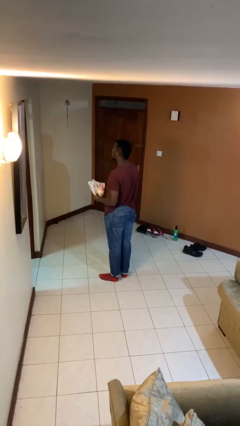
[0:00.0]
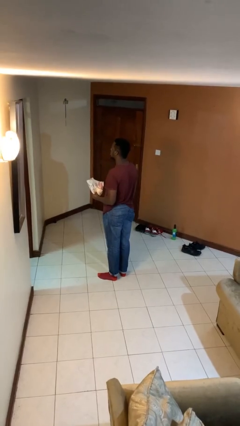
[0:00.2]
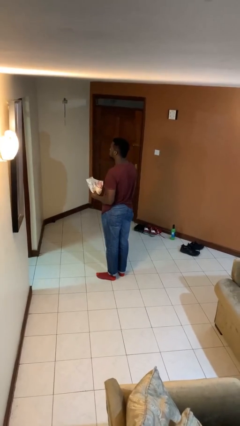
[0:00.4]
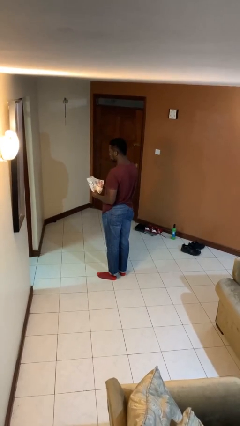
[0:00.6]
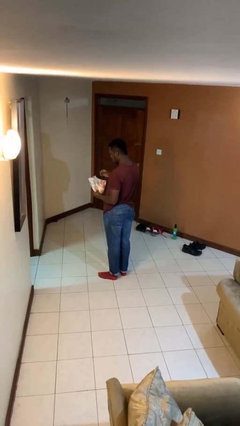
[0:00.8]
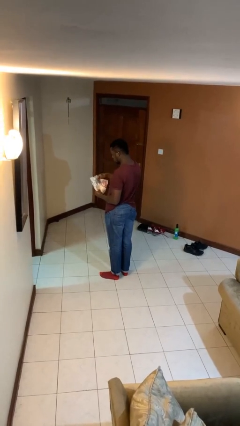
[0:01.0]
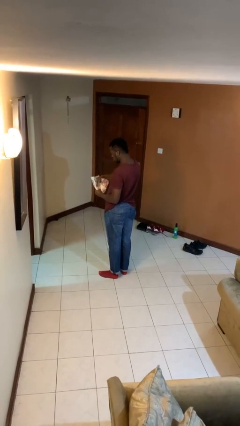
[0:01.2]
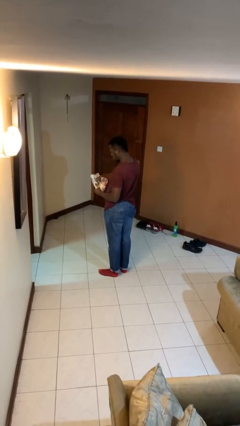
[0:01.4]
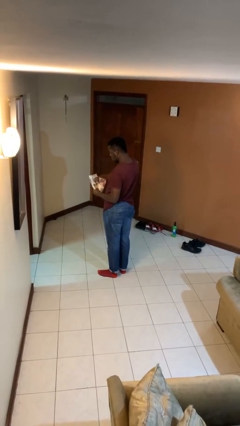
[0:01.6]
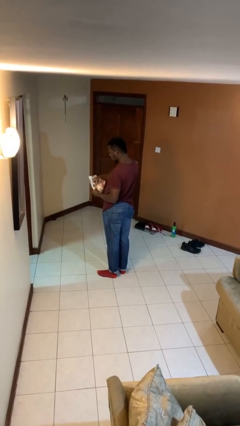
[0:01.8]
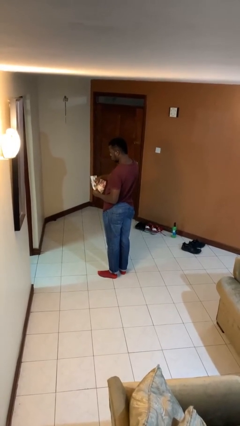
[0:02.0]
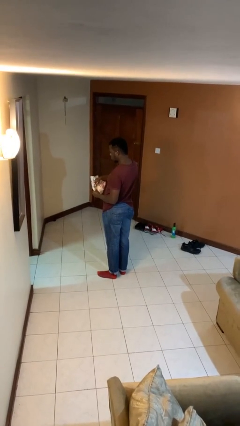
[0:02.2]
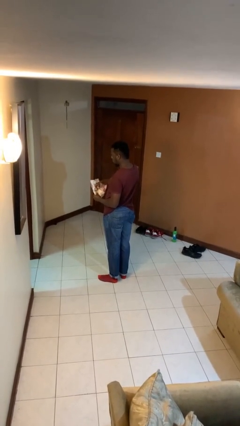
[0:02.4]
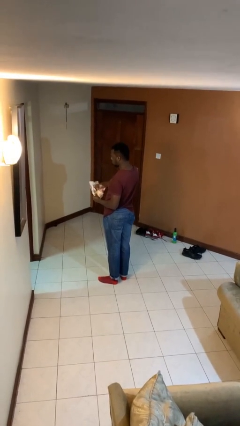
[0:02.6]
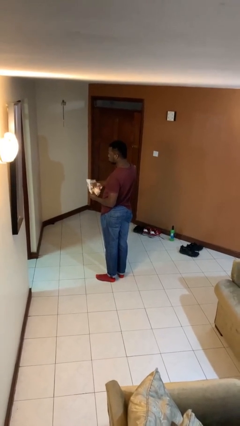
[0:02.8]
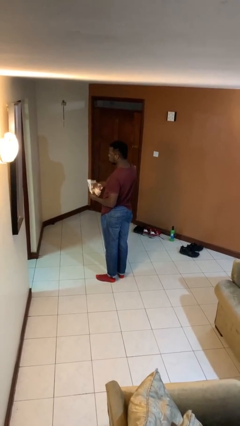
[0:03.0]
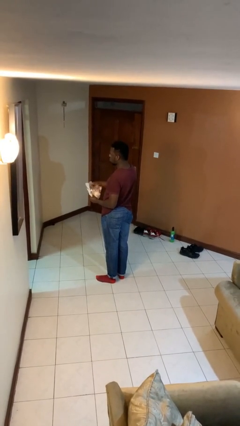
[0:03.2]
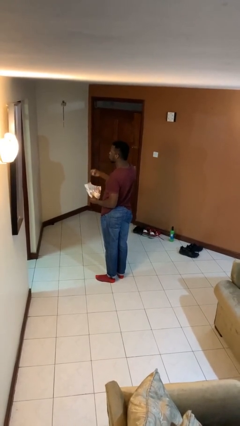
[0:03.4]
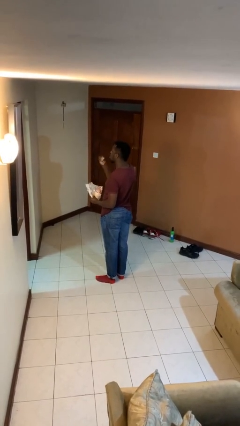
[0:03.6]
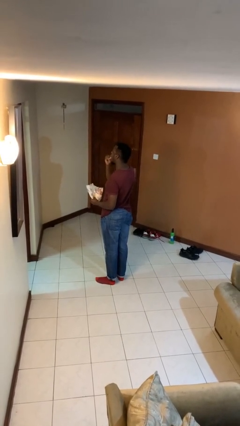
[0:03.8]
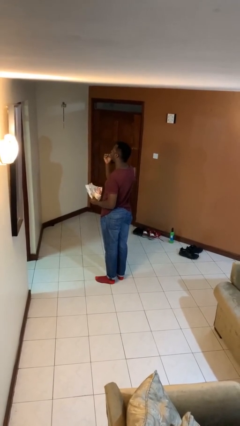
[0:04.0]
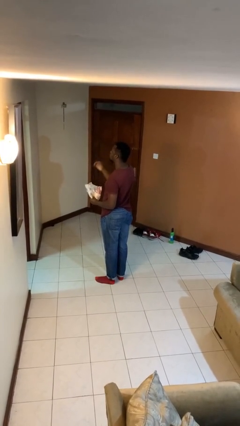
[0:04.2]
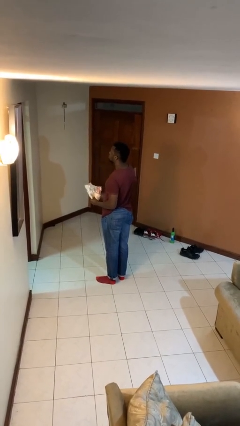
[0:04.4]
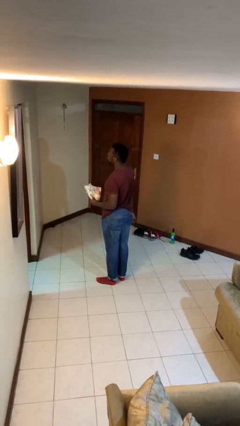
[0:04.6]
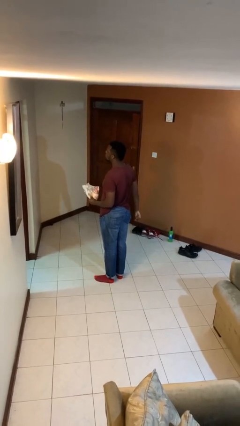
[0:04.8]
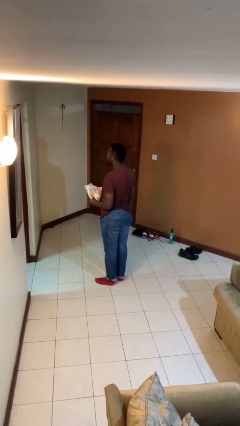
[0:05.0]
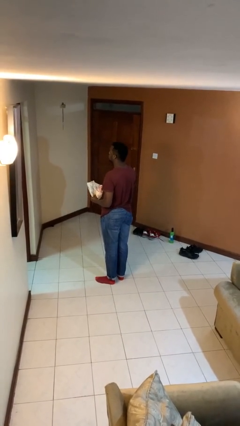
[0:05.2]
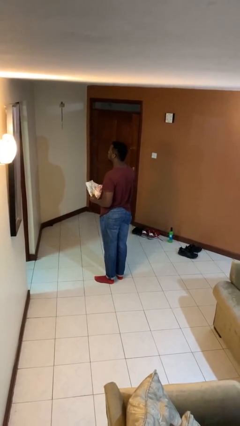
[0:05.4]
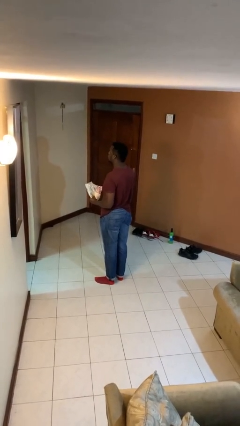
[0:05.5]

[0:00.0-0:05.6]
person eats snack from bag

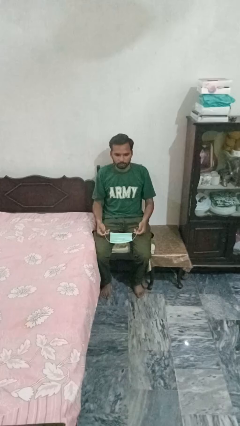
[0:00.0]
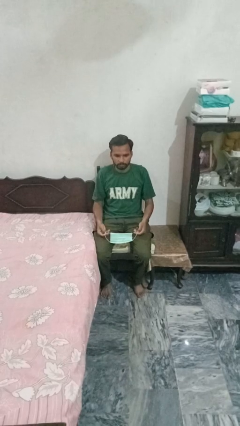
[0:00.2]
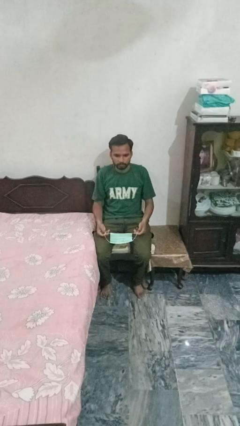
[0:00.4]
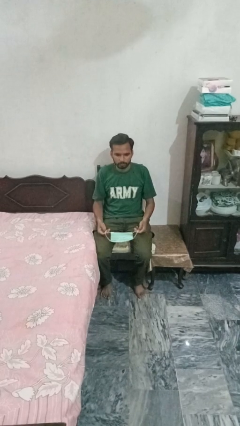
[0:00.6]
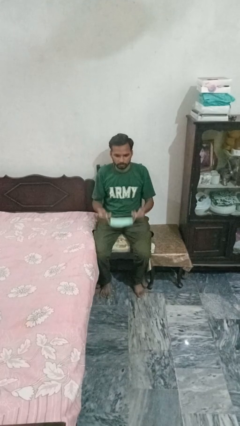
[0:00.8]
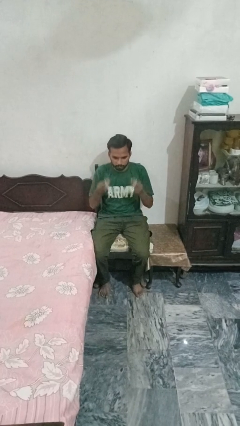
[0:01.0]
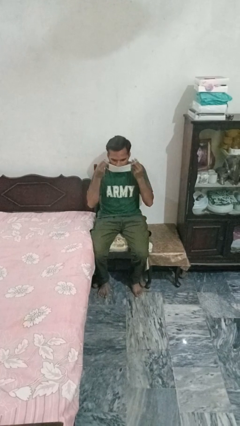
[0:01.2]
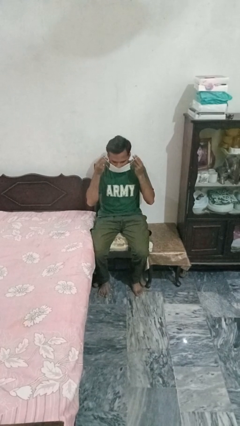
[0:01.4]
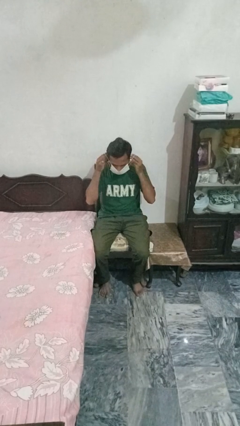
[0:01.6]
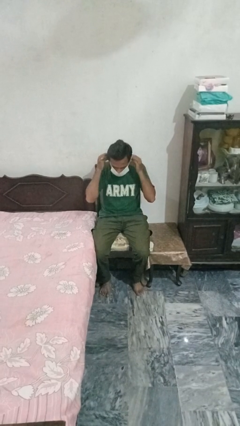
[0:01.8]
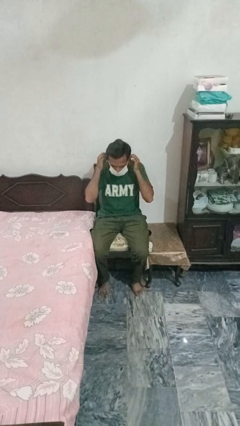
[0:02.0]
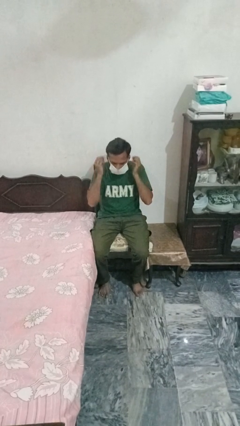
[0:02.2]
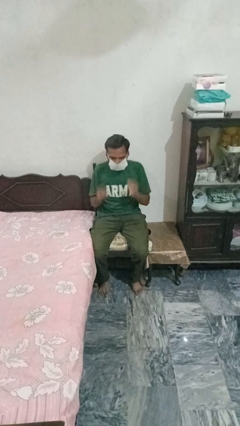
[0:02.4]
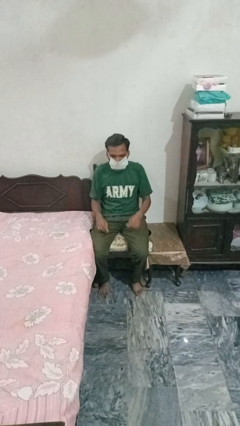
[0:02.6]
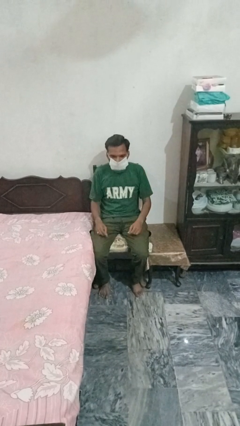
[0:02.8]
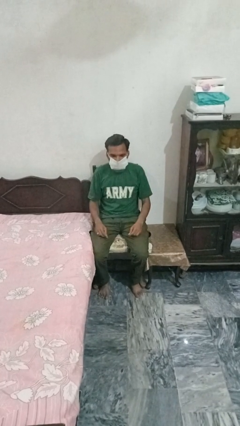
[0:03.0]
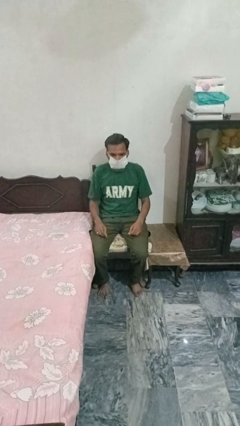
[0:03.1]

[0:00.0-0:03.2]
person puts on facemask

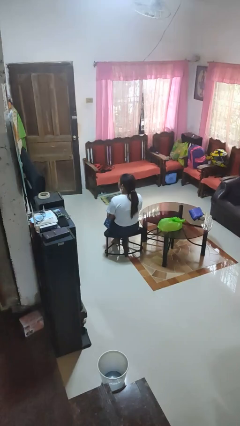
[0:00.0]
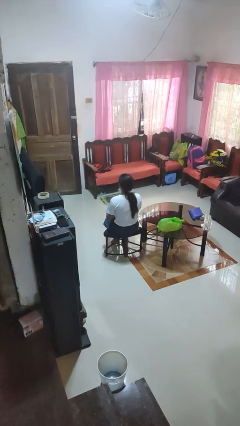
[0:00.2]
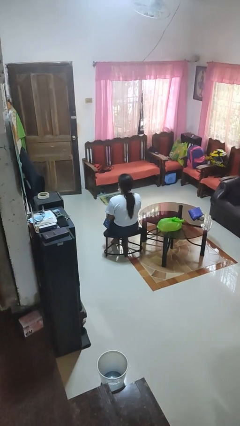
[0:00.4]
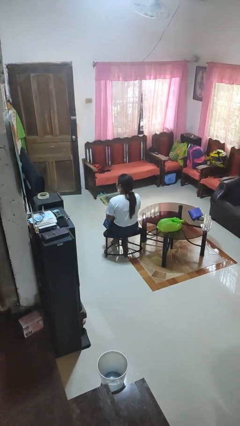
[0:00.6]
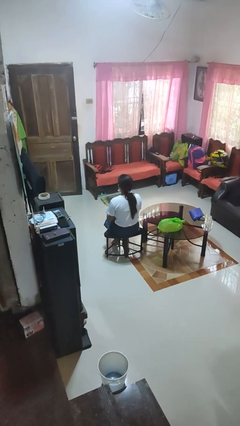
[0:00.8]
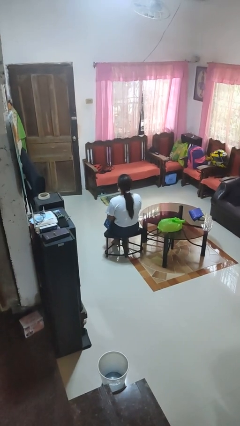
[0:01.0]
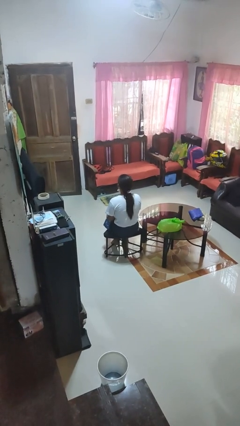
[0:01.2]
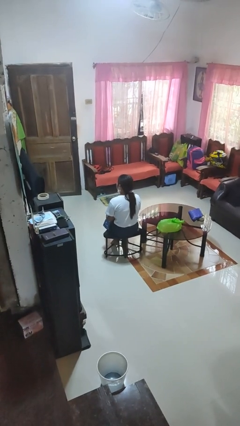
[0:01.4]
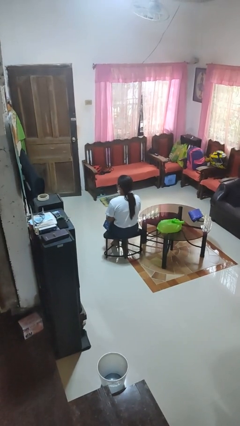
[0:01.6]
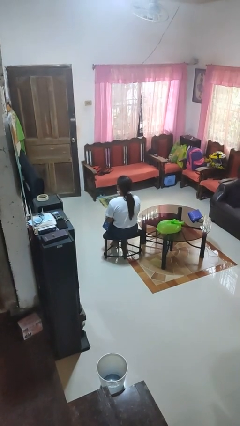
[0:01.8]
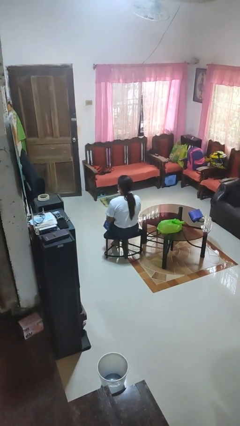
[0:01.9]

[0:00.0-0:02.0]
person shakes head

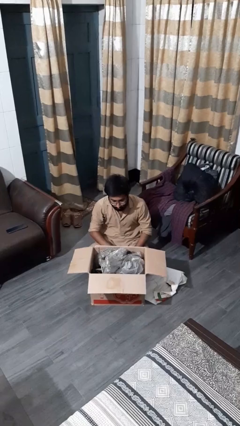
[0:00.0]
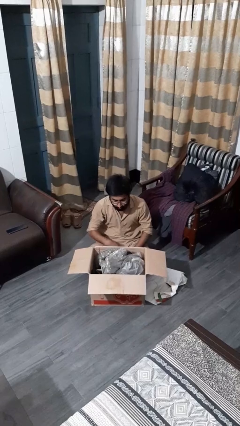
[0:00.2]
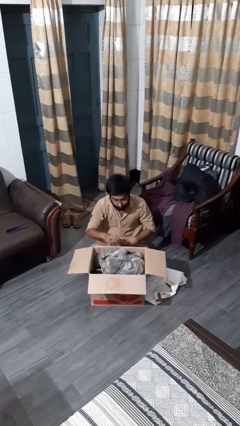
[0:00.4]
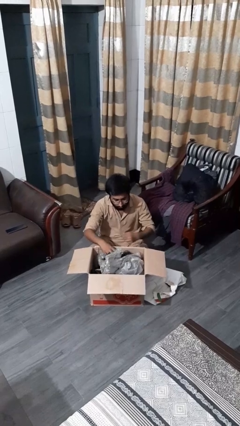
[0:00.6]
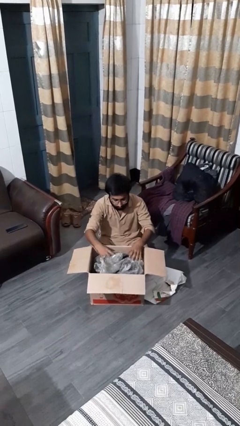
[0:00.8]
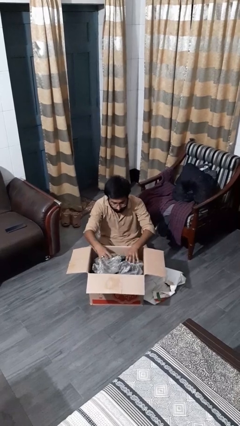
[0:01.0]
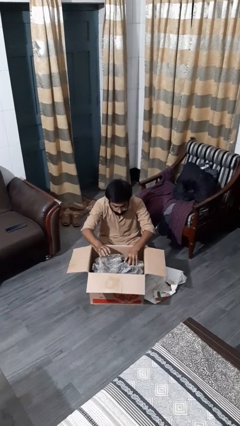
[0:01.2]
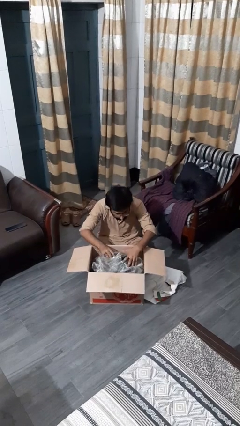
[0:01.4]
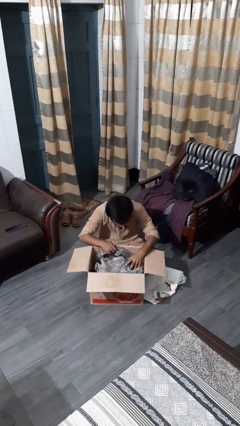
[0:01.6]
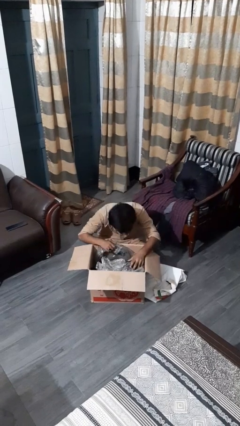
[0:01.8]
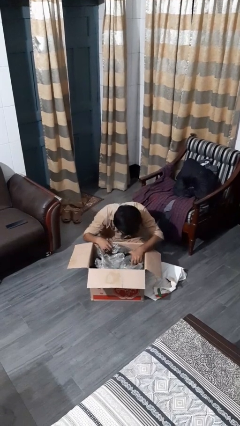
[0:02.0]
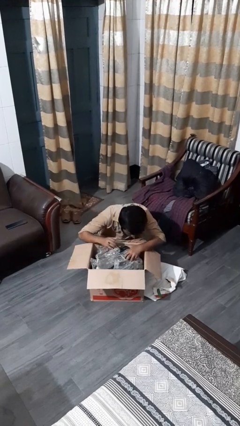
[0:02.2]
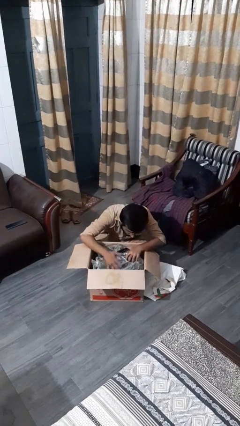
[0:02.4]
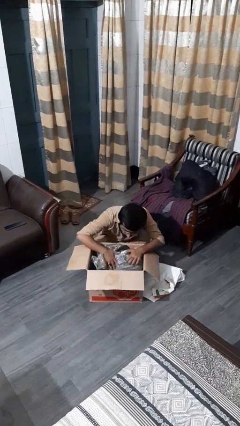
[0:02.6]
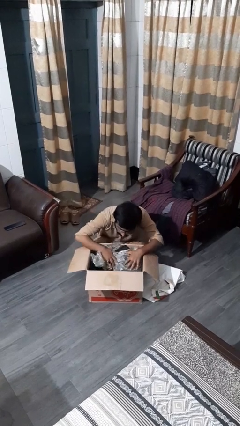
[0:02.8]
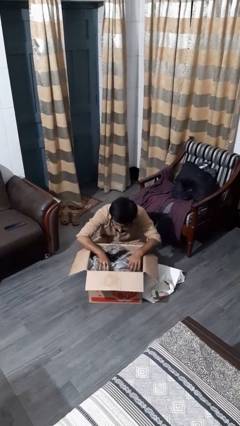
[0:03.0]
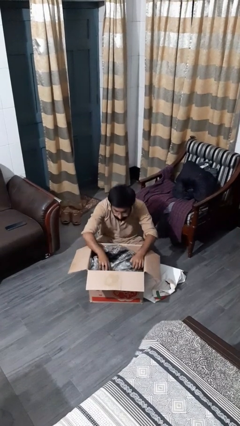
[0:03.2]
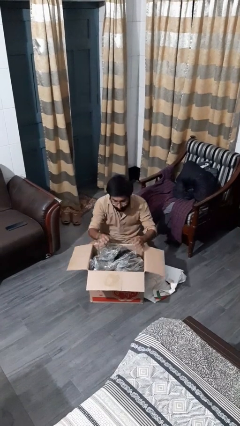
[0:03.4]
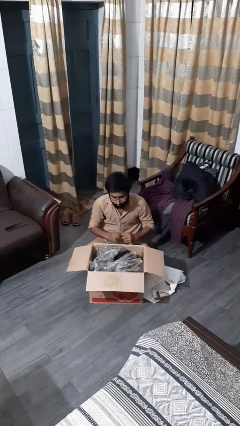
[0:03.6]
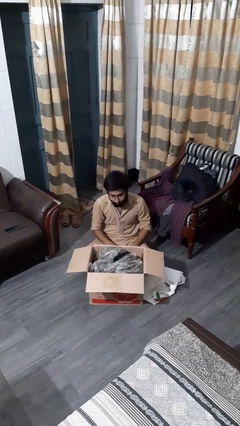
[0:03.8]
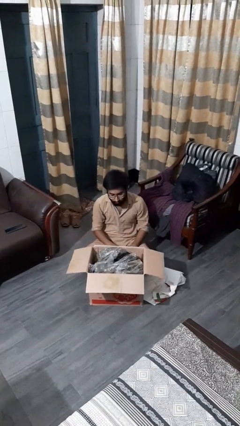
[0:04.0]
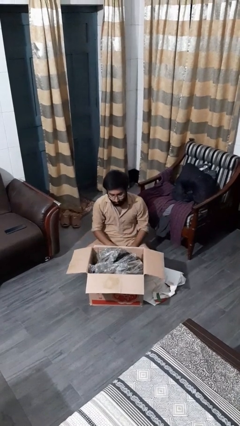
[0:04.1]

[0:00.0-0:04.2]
person searches in box

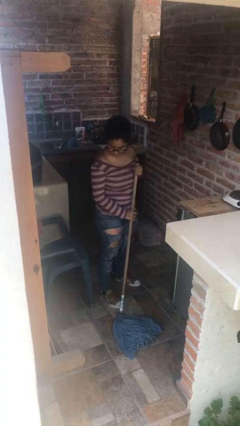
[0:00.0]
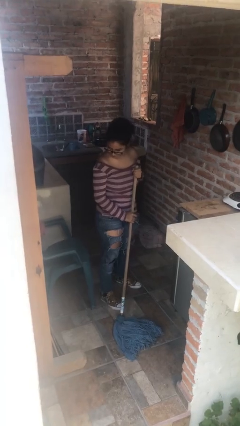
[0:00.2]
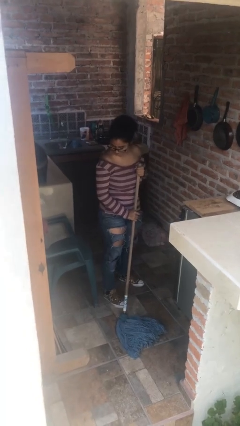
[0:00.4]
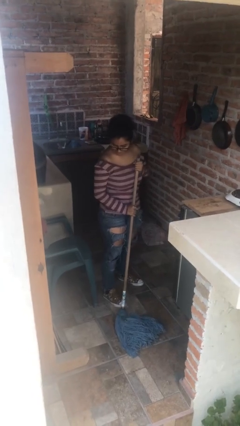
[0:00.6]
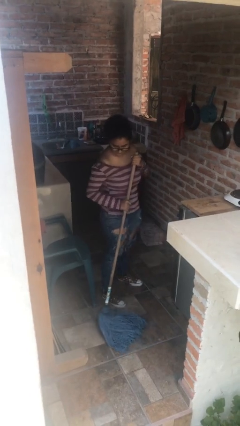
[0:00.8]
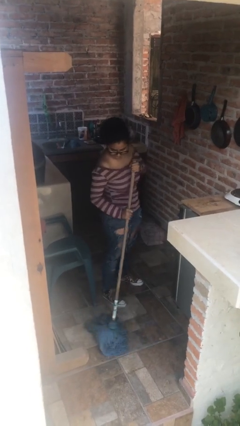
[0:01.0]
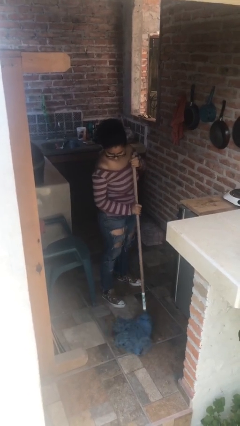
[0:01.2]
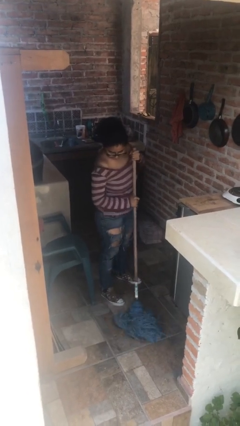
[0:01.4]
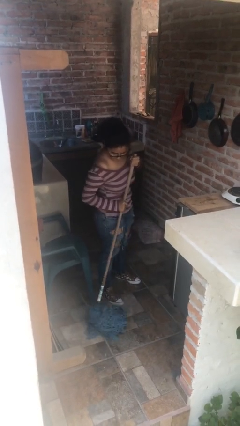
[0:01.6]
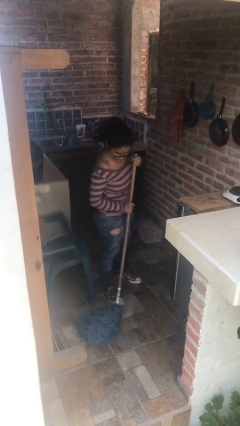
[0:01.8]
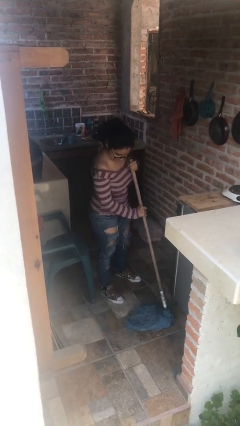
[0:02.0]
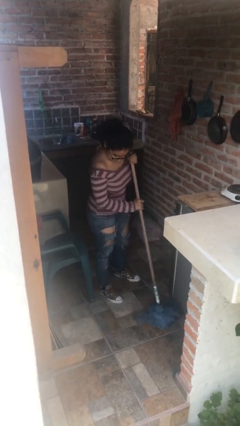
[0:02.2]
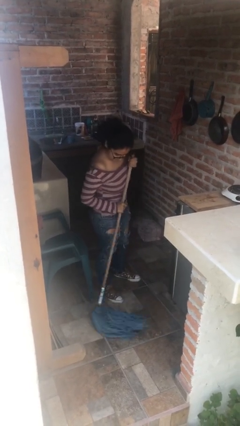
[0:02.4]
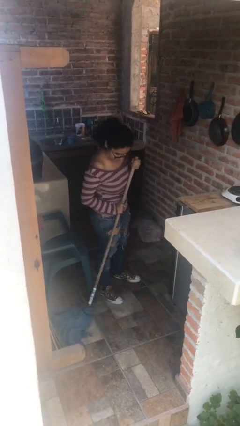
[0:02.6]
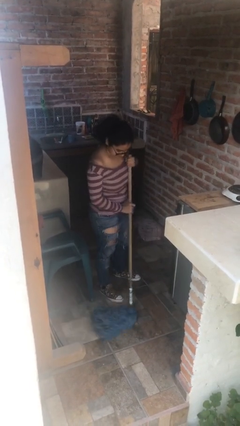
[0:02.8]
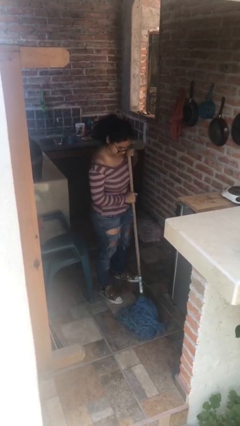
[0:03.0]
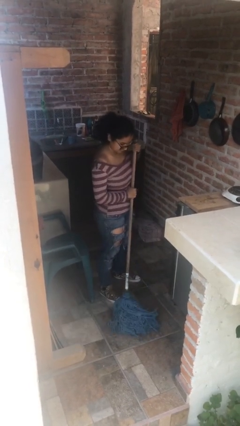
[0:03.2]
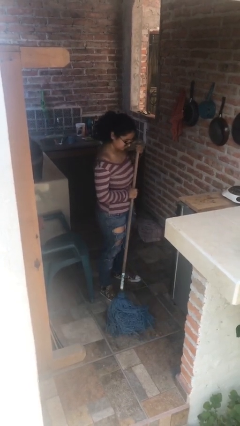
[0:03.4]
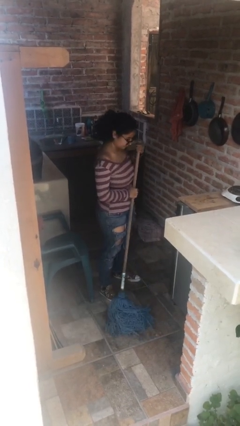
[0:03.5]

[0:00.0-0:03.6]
person mops
